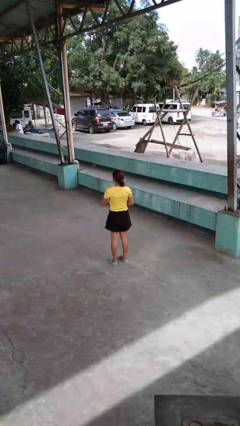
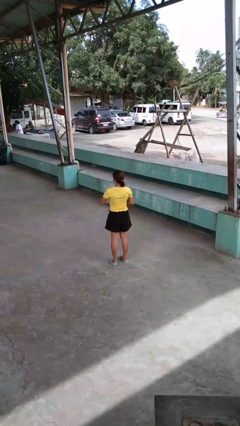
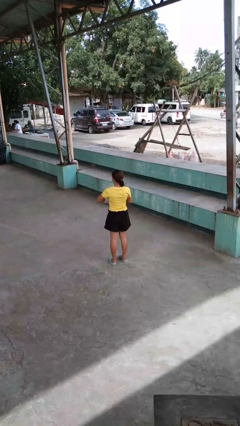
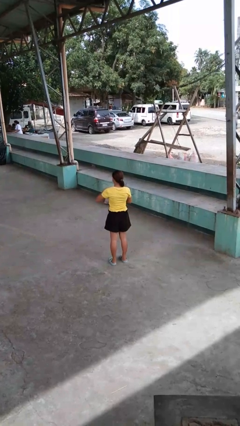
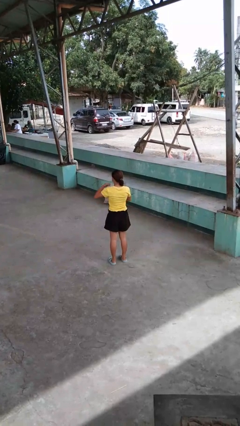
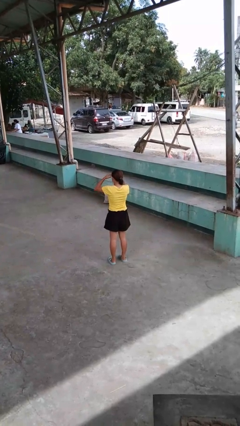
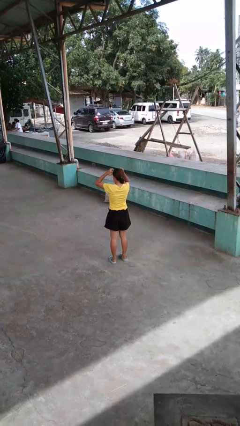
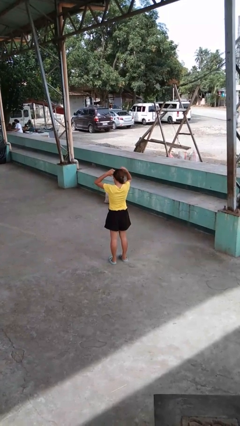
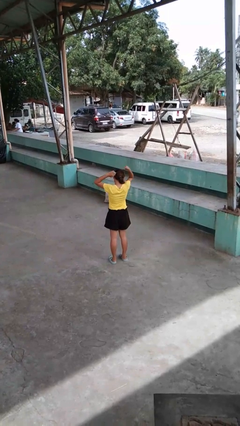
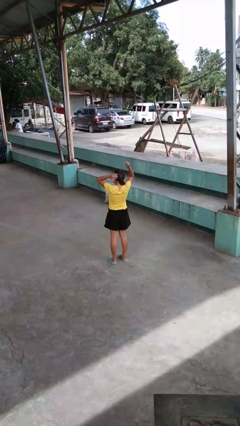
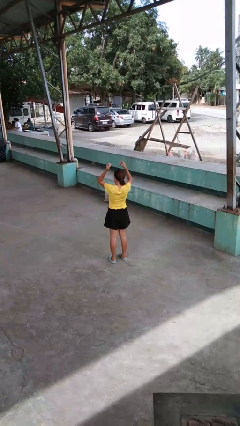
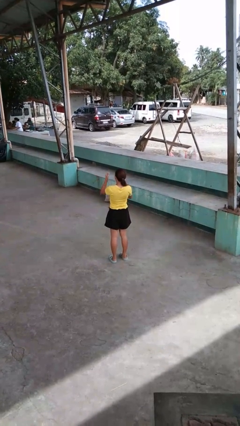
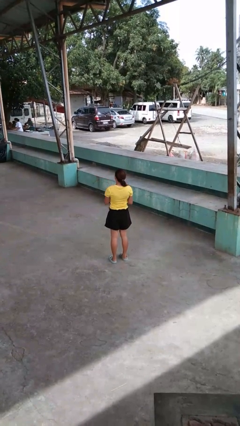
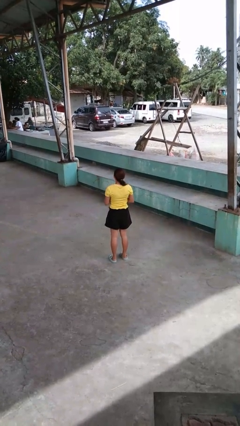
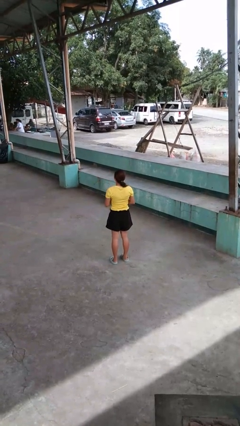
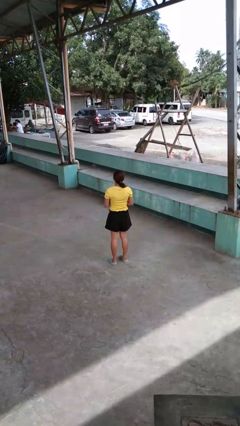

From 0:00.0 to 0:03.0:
person takes off necklace

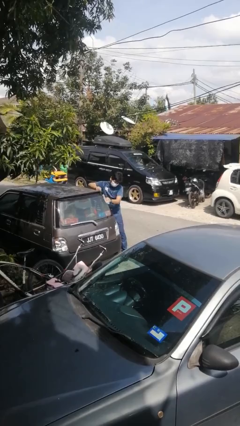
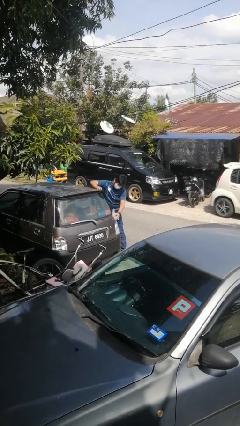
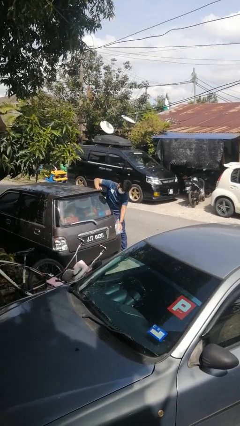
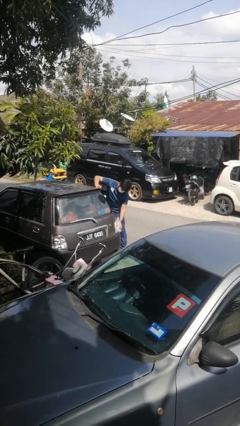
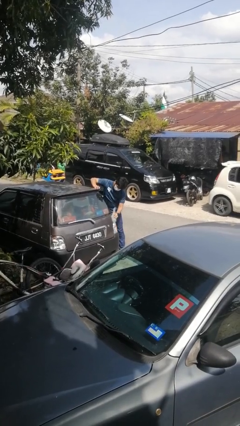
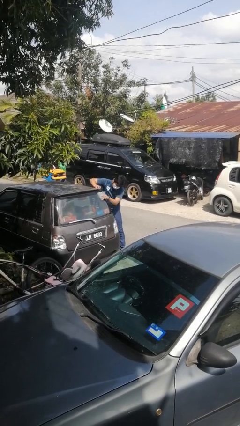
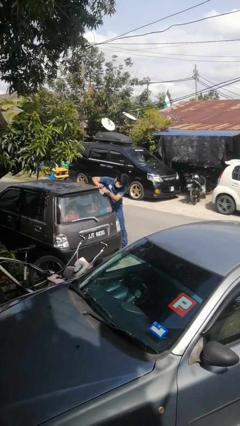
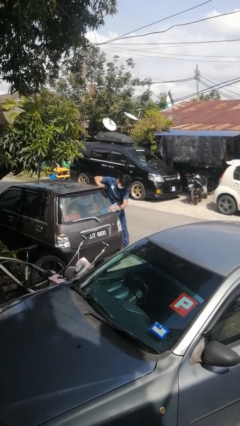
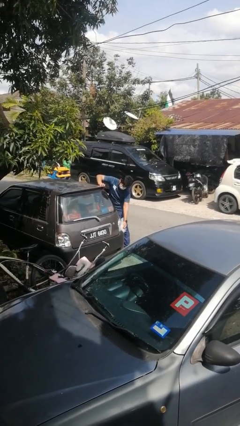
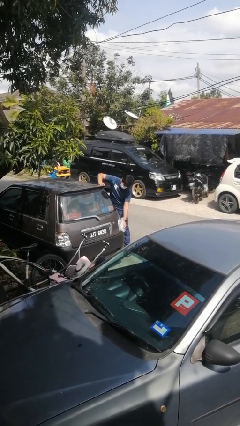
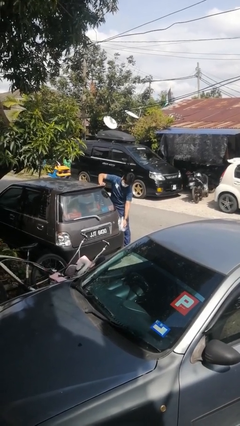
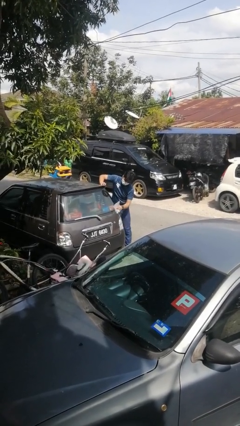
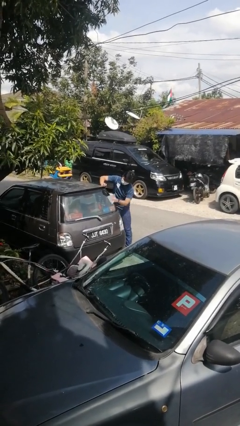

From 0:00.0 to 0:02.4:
person polishes car with rag

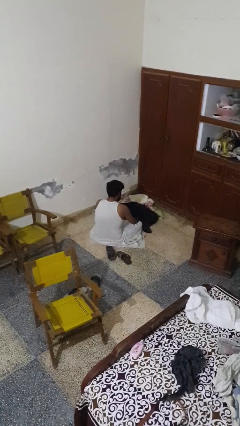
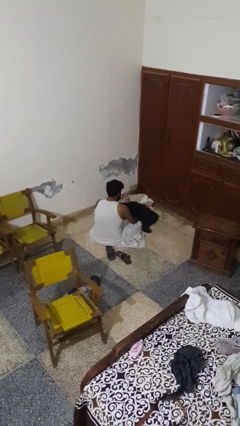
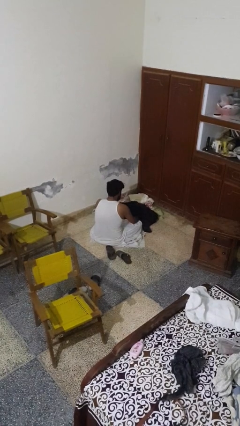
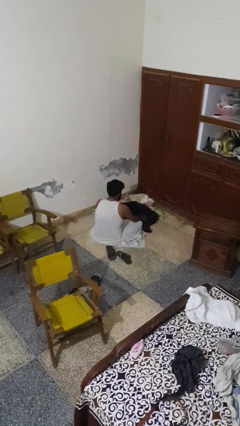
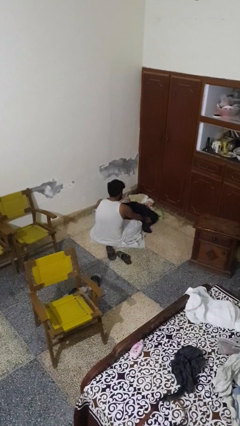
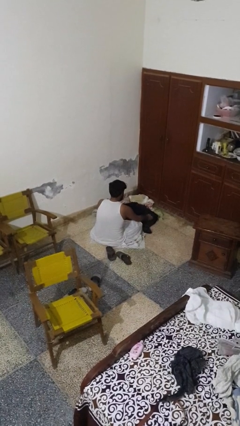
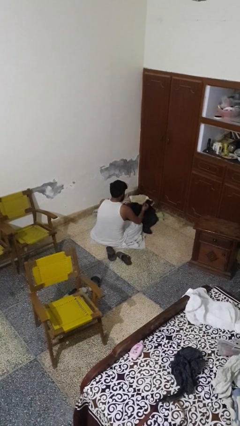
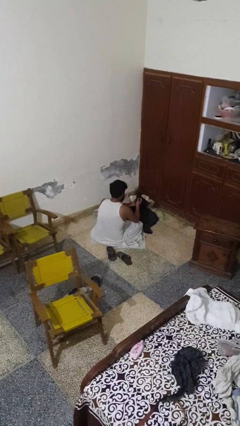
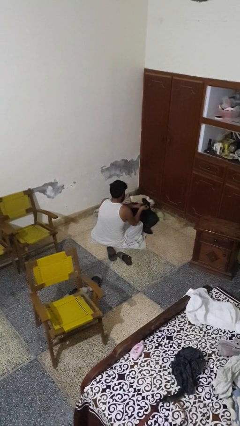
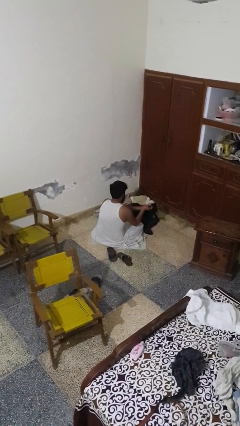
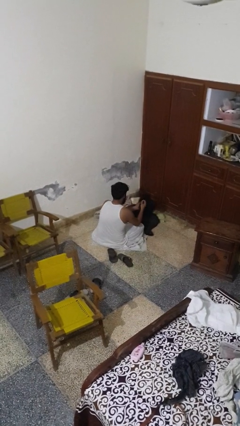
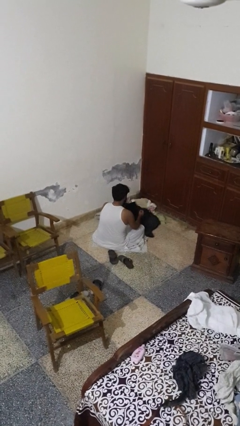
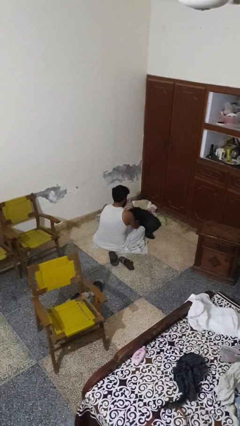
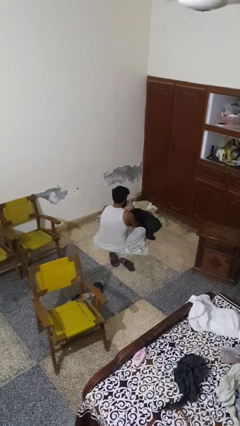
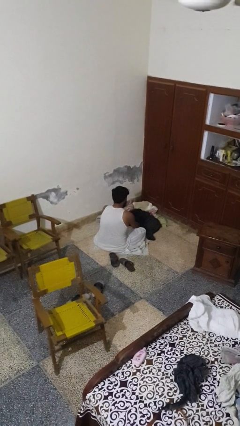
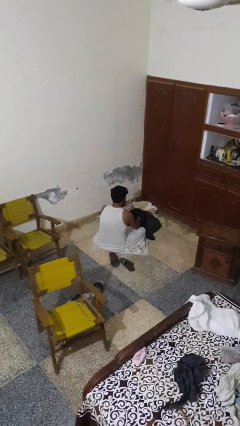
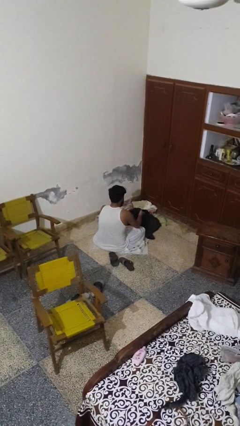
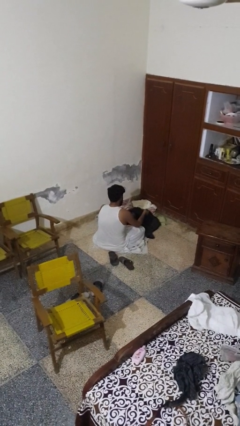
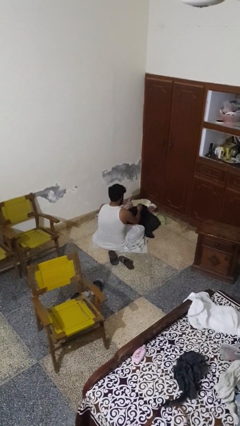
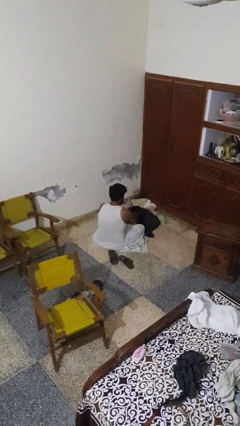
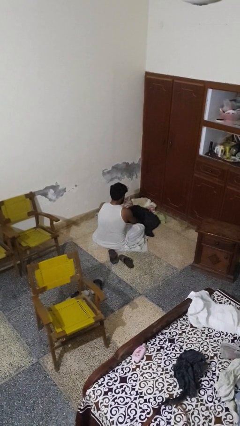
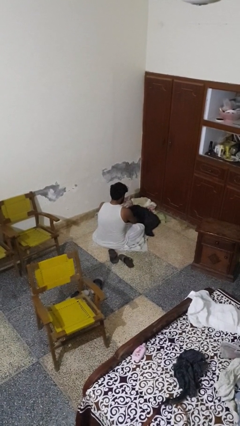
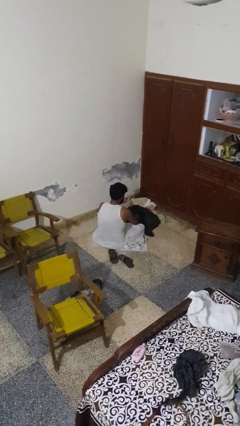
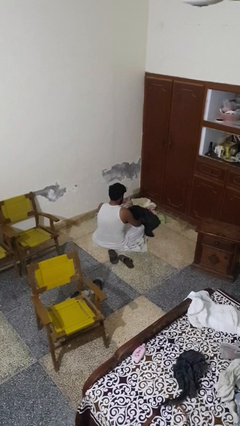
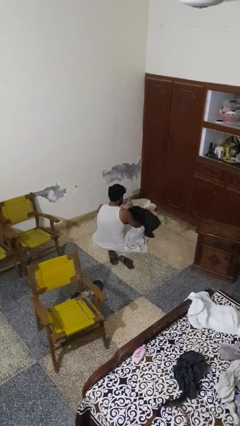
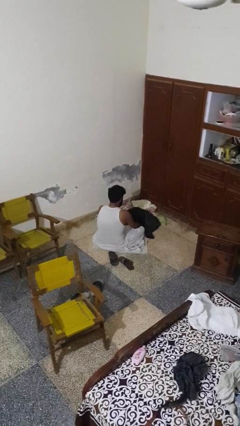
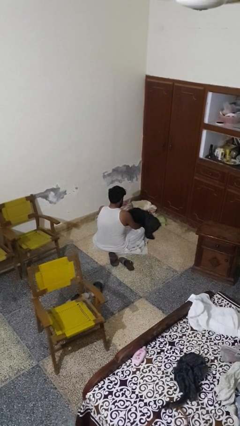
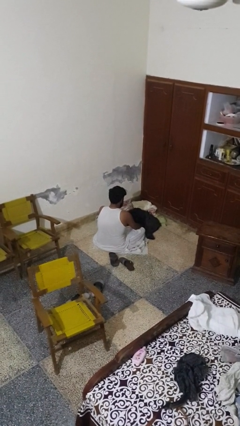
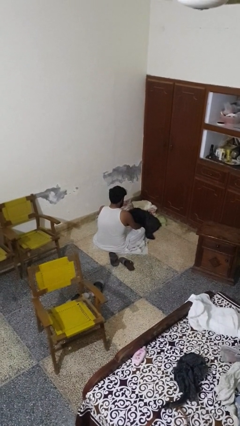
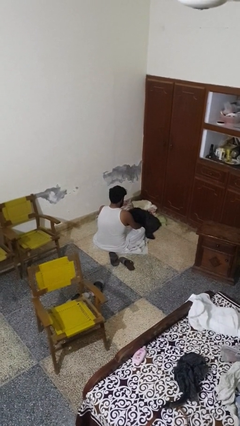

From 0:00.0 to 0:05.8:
person folds pants

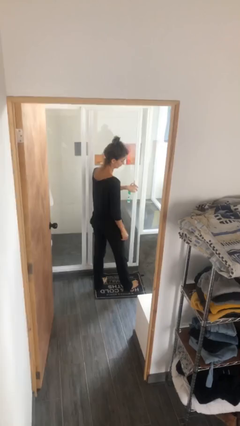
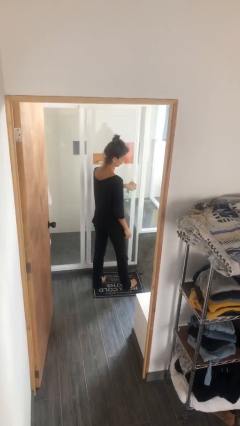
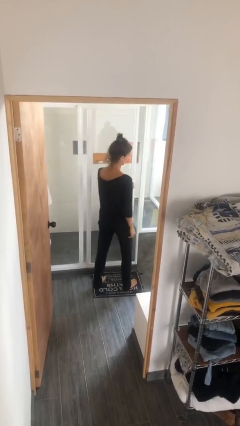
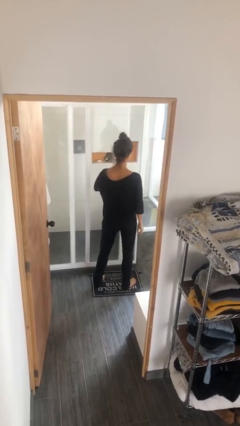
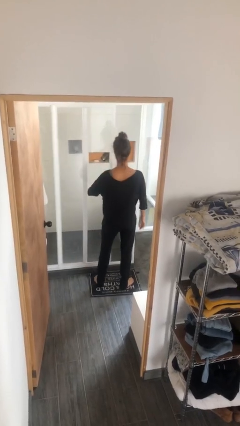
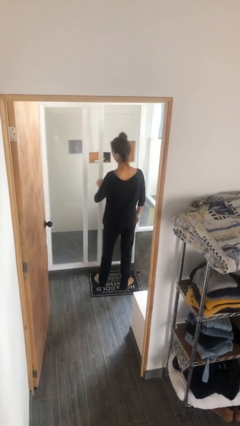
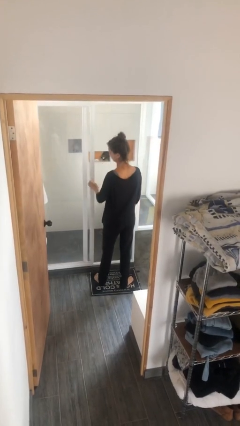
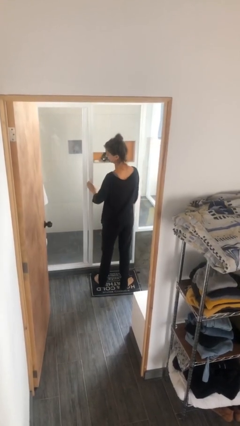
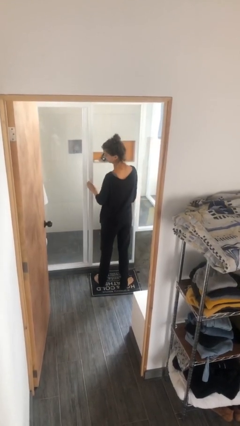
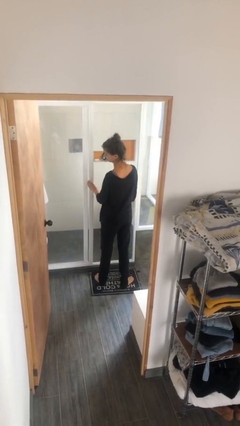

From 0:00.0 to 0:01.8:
person opens sliding door

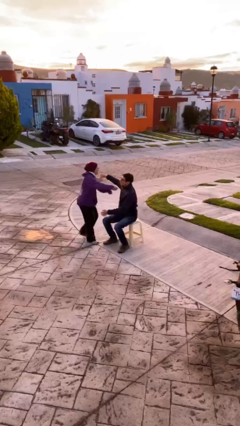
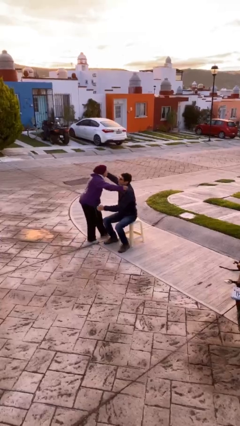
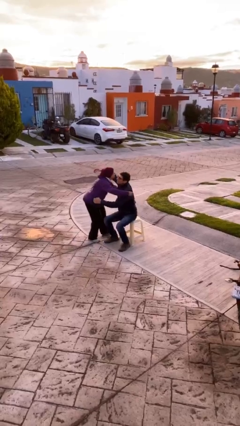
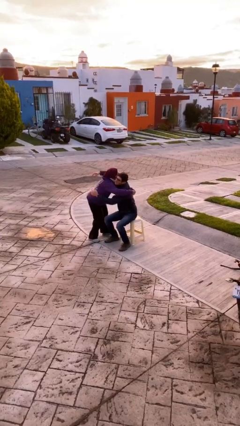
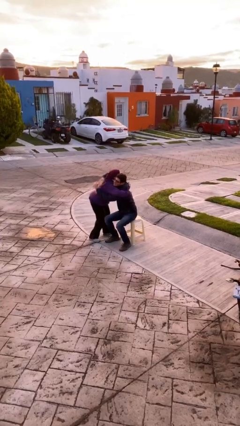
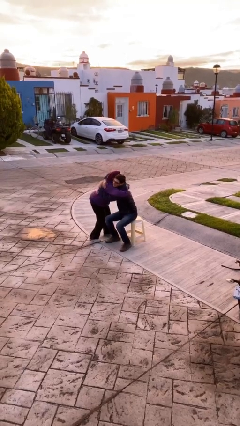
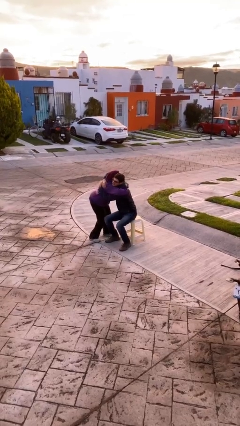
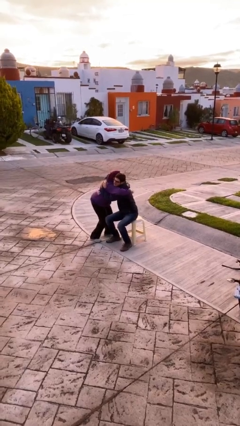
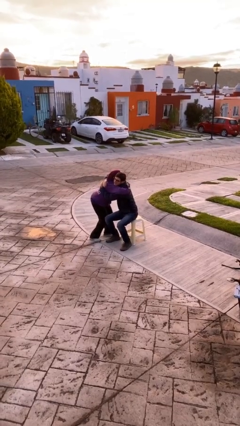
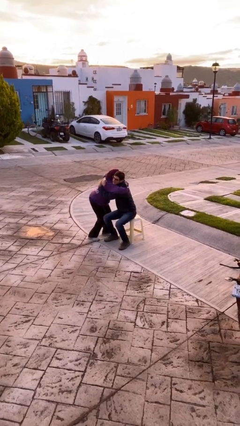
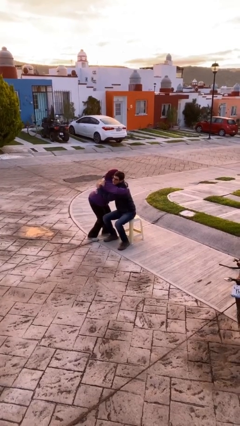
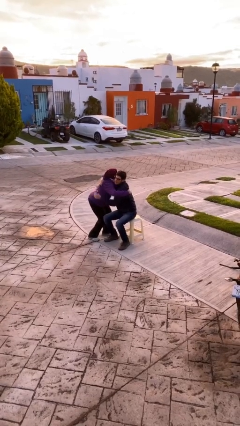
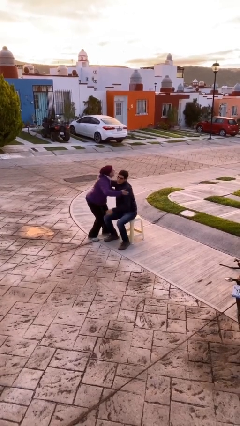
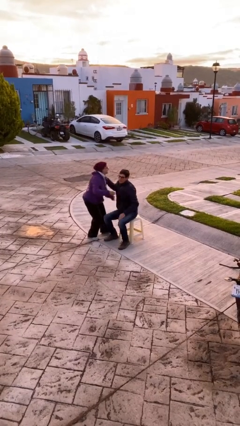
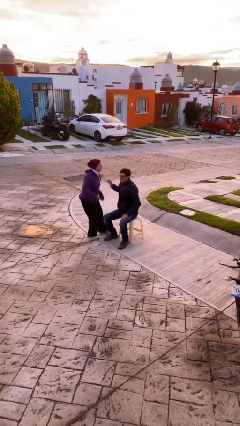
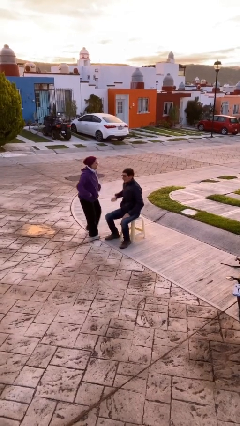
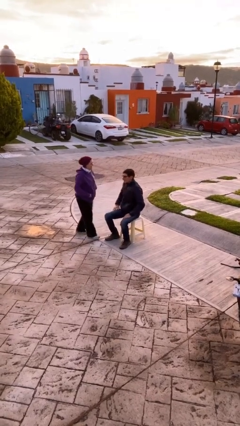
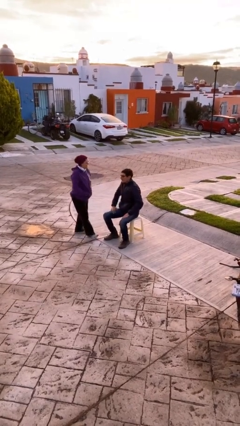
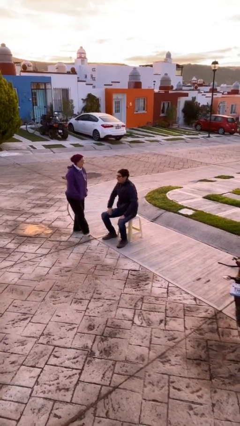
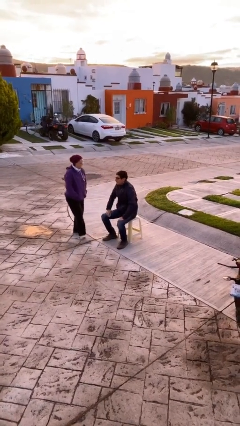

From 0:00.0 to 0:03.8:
person embraces person

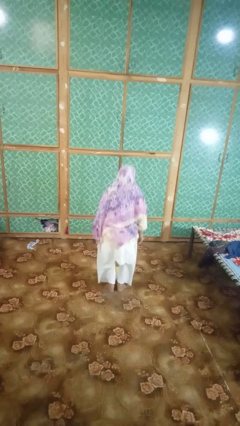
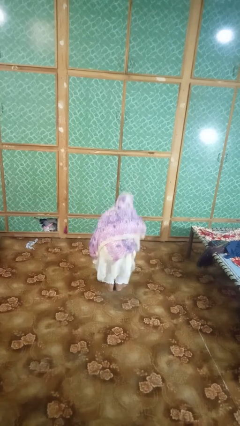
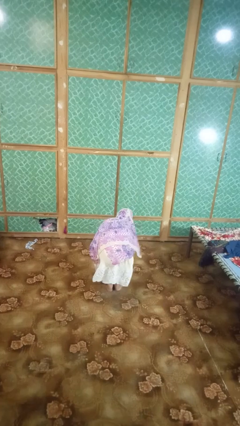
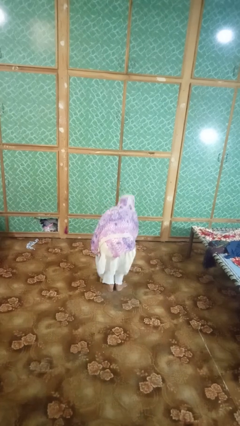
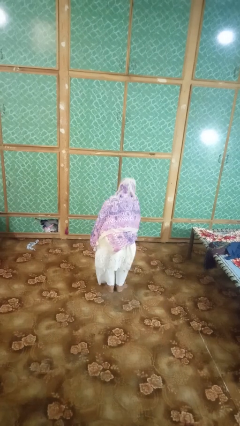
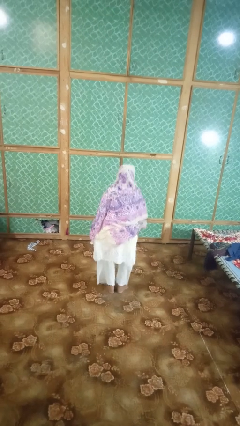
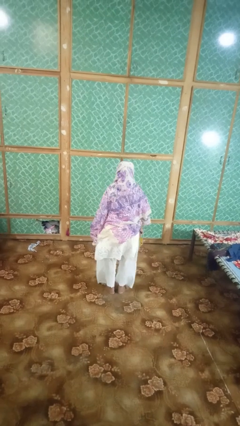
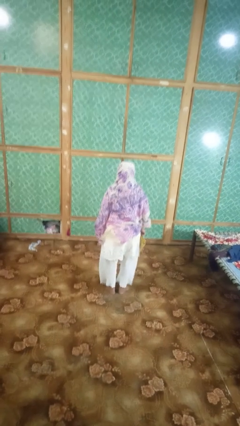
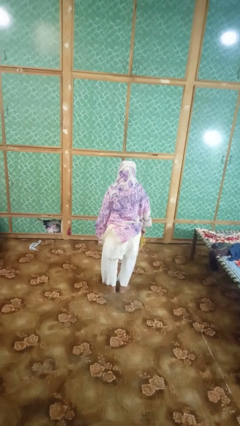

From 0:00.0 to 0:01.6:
person picks up object from floor
